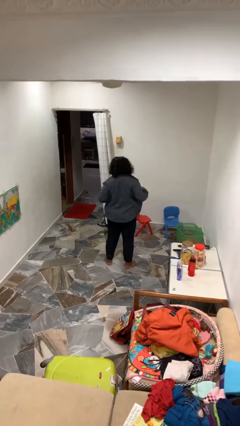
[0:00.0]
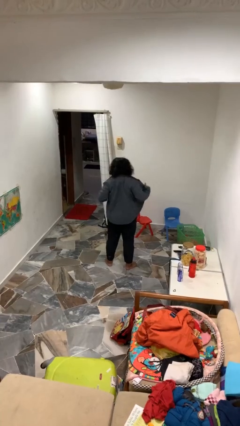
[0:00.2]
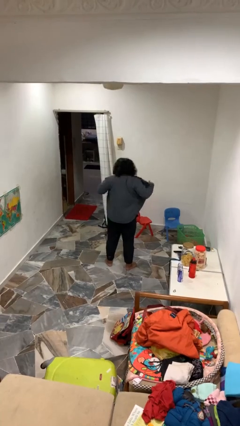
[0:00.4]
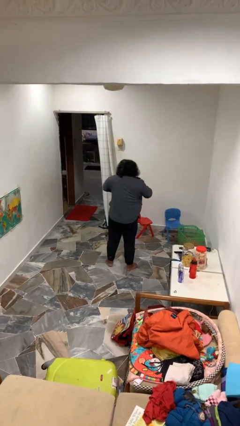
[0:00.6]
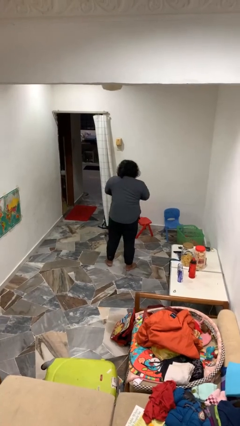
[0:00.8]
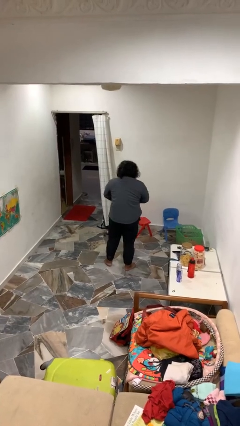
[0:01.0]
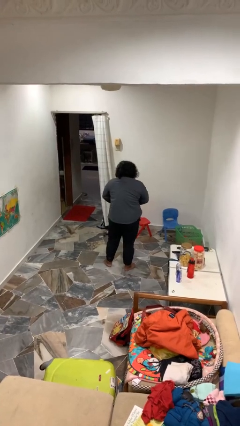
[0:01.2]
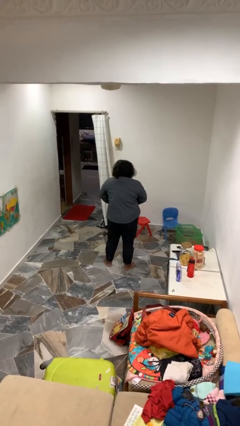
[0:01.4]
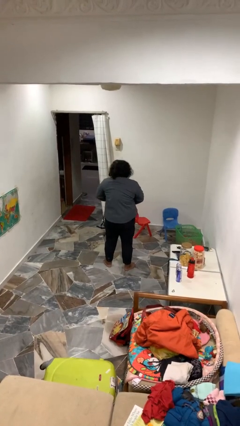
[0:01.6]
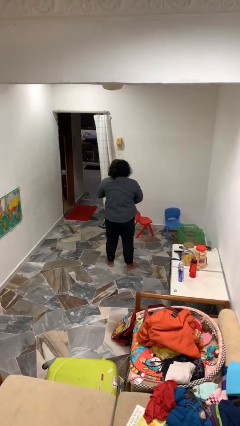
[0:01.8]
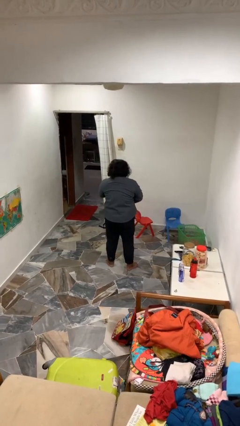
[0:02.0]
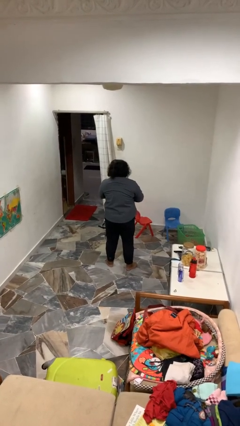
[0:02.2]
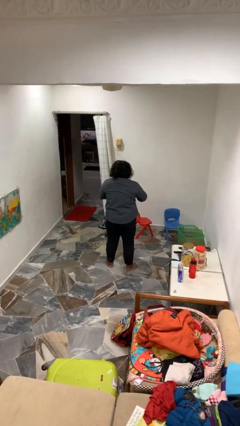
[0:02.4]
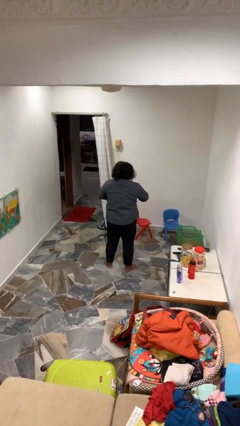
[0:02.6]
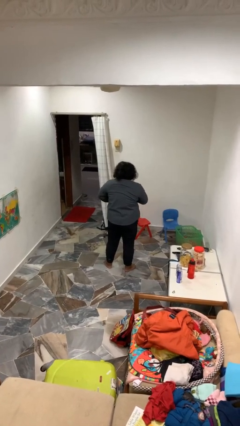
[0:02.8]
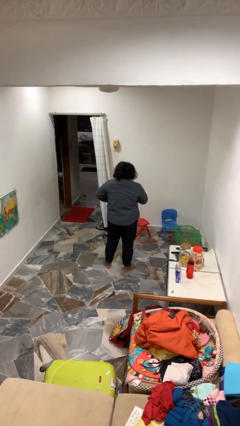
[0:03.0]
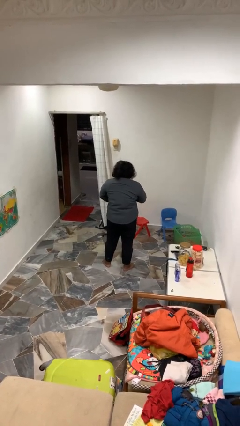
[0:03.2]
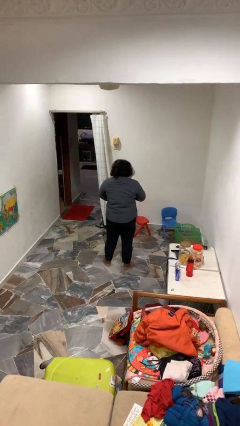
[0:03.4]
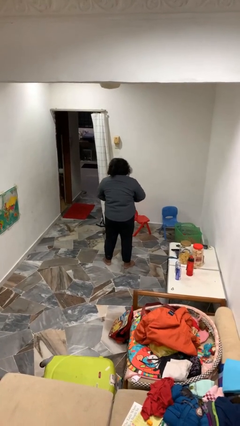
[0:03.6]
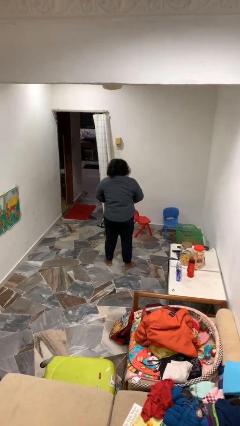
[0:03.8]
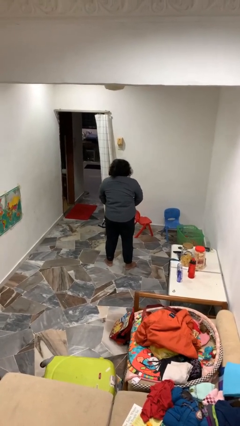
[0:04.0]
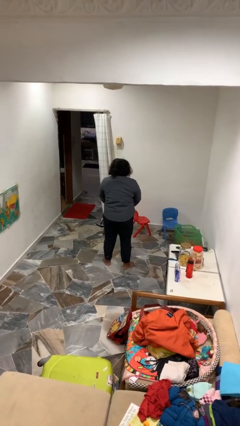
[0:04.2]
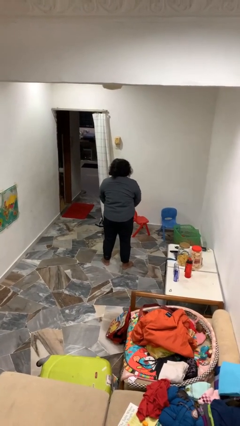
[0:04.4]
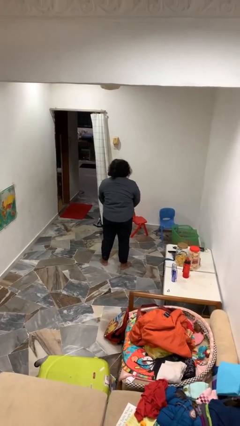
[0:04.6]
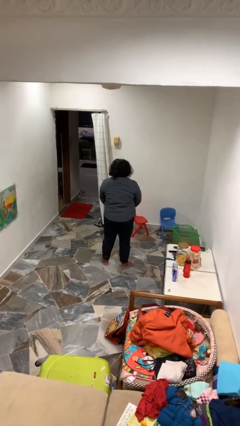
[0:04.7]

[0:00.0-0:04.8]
person buttons shirt

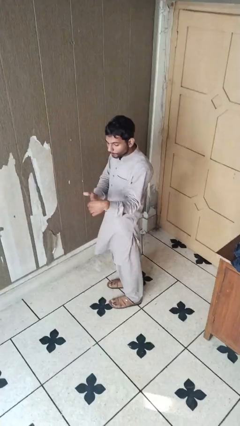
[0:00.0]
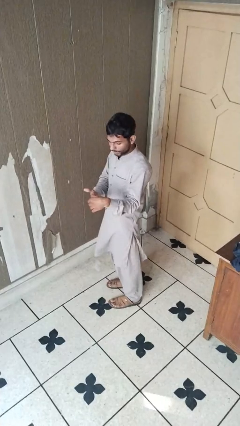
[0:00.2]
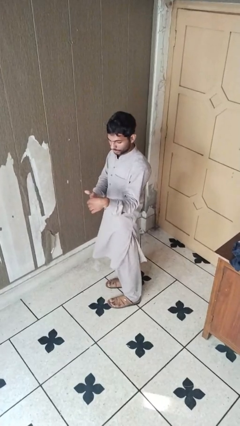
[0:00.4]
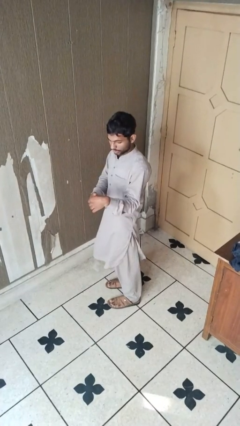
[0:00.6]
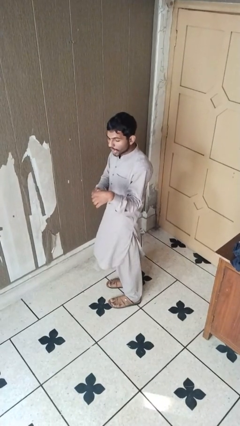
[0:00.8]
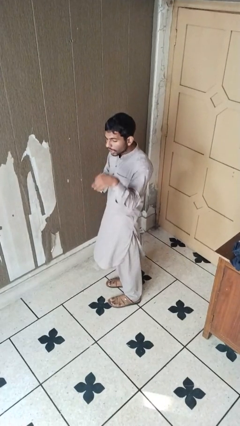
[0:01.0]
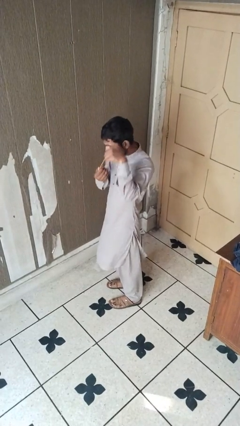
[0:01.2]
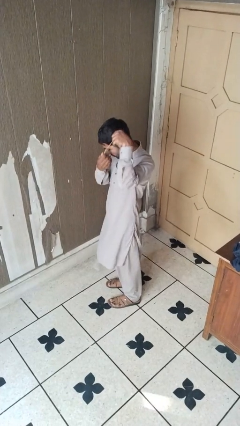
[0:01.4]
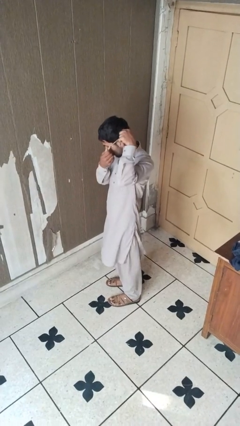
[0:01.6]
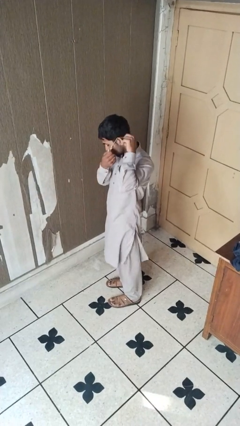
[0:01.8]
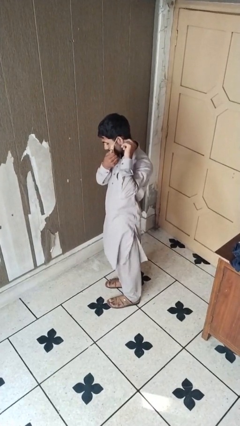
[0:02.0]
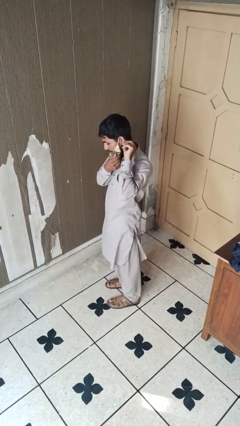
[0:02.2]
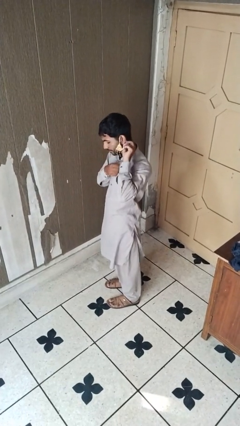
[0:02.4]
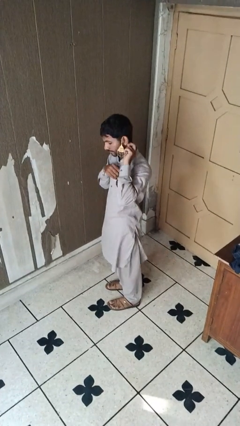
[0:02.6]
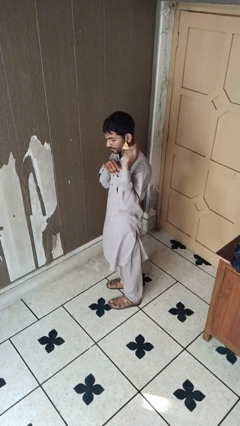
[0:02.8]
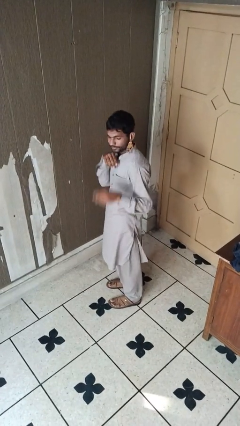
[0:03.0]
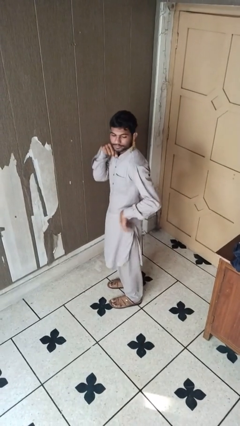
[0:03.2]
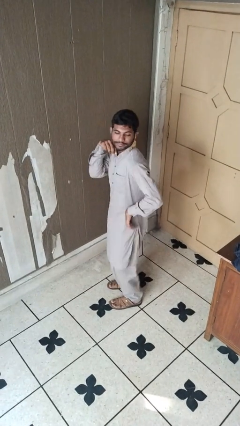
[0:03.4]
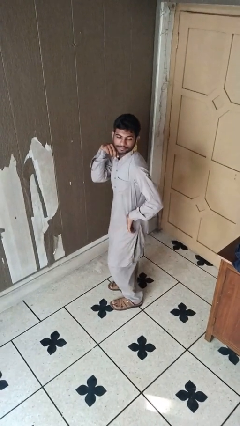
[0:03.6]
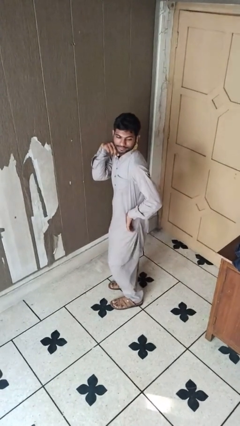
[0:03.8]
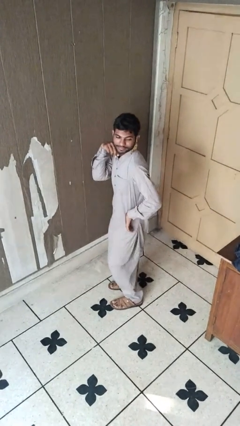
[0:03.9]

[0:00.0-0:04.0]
person puts on earrings

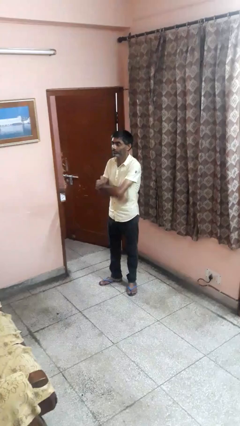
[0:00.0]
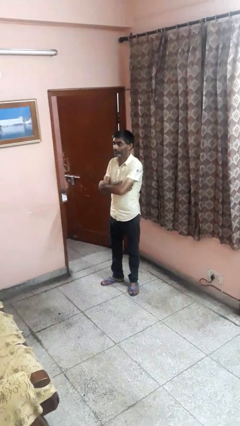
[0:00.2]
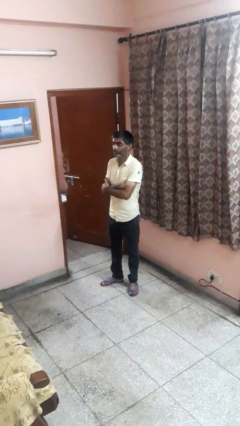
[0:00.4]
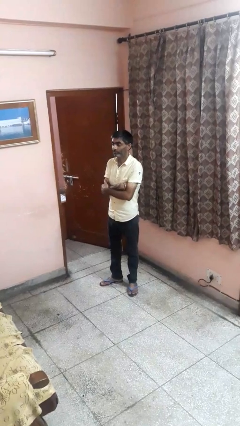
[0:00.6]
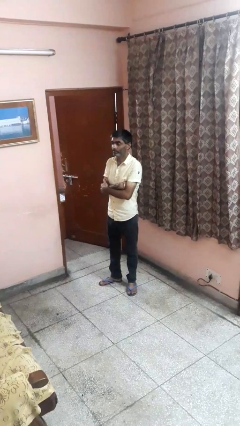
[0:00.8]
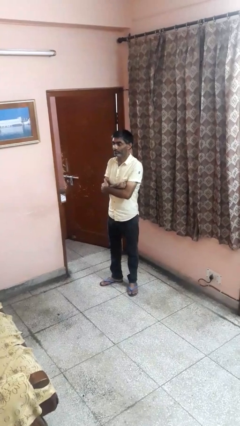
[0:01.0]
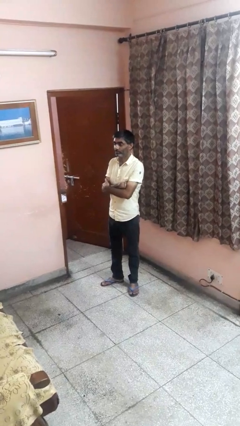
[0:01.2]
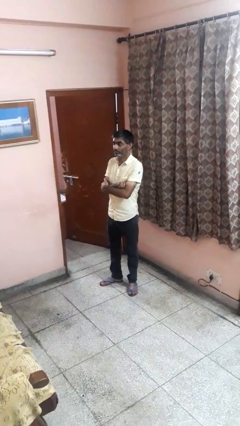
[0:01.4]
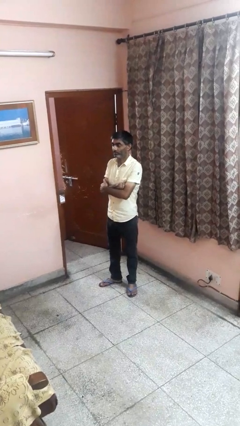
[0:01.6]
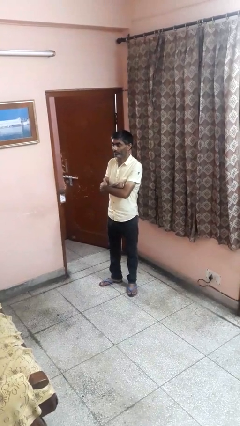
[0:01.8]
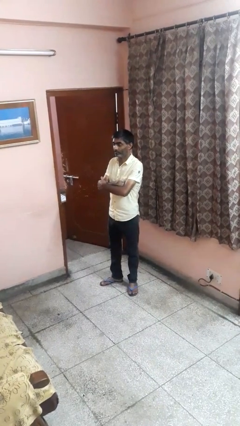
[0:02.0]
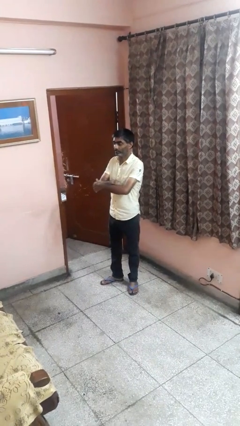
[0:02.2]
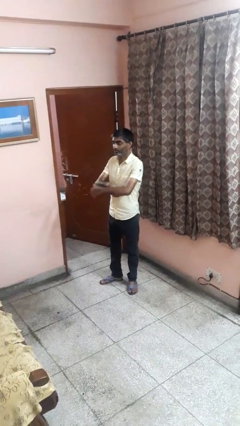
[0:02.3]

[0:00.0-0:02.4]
person crosses arms

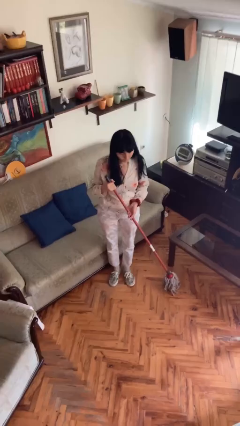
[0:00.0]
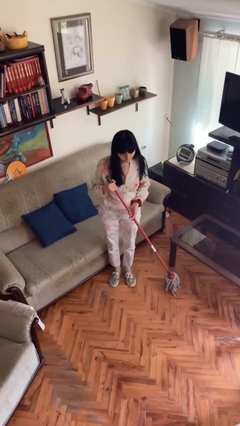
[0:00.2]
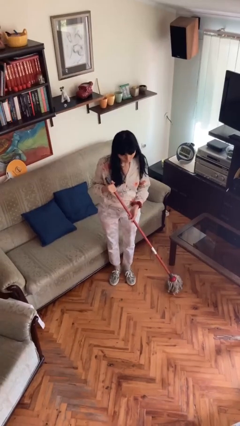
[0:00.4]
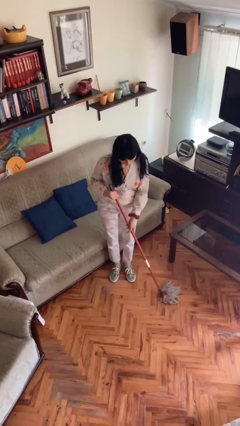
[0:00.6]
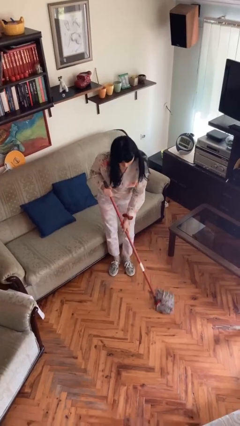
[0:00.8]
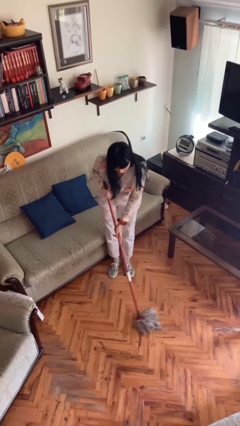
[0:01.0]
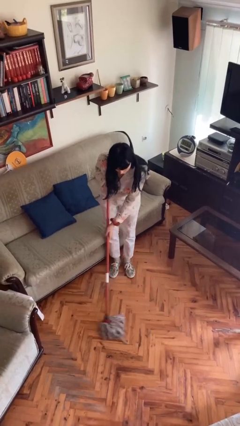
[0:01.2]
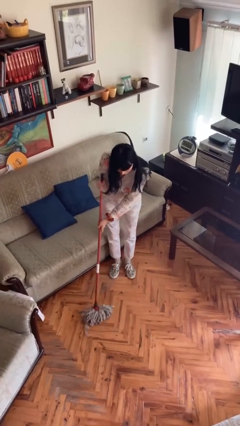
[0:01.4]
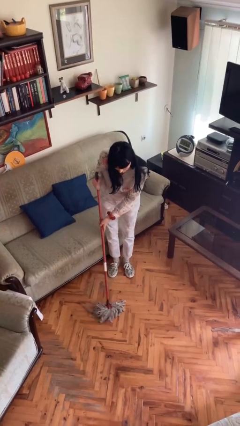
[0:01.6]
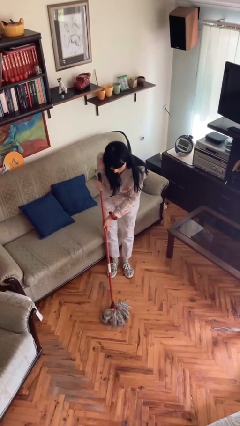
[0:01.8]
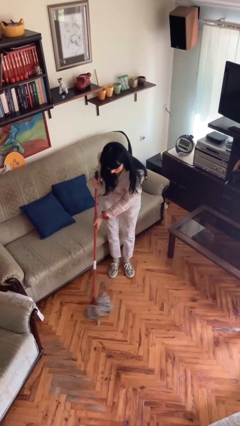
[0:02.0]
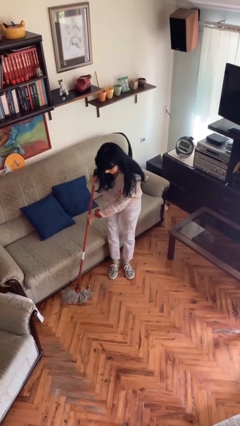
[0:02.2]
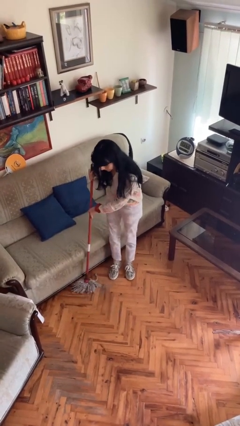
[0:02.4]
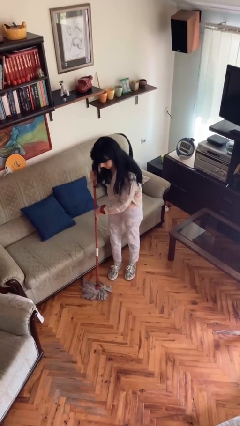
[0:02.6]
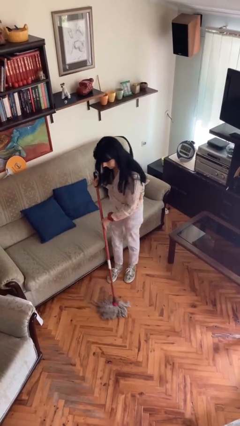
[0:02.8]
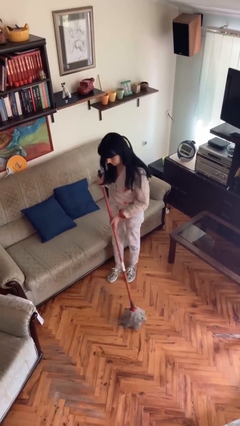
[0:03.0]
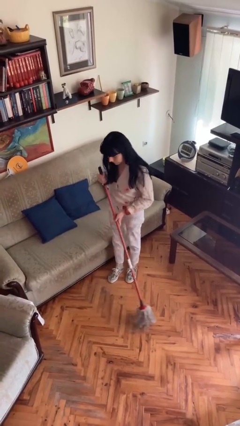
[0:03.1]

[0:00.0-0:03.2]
person sweeps floor

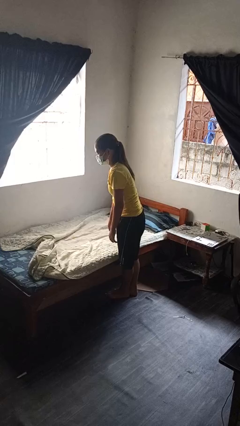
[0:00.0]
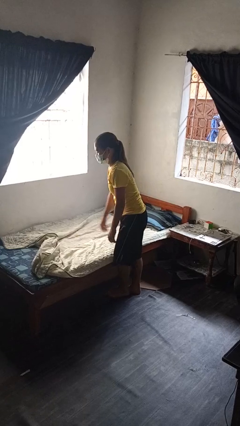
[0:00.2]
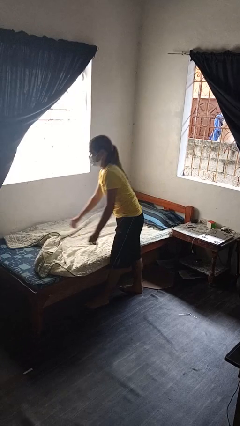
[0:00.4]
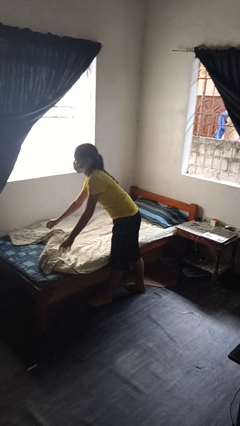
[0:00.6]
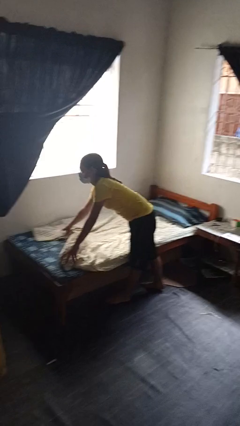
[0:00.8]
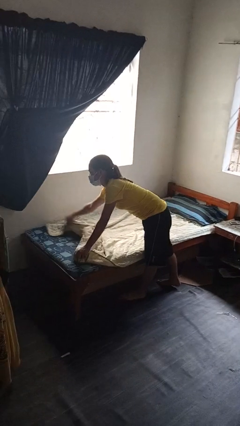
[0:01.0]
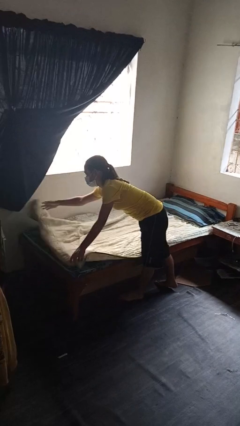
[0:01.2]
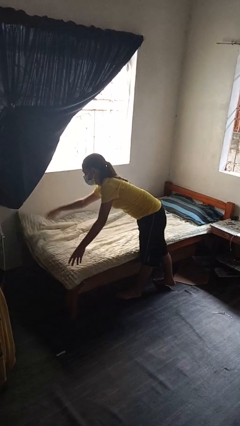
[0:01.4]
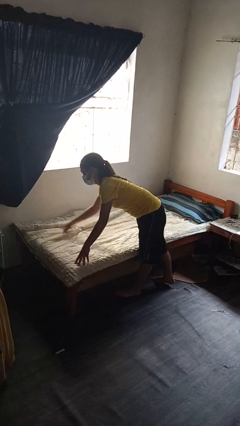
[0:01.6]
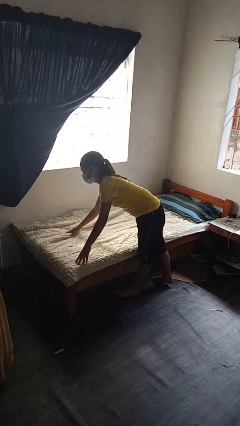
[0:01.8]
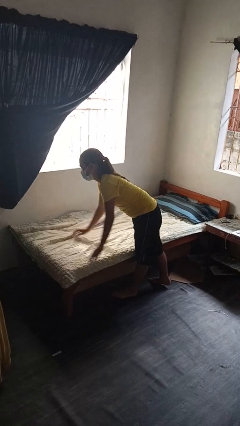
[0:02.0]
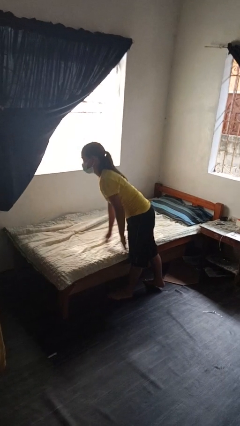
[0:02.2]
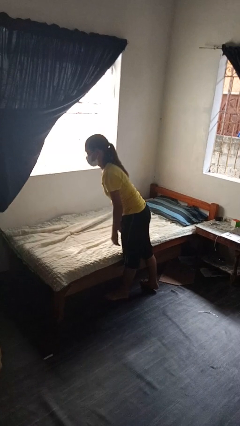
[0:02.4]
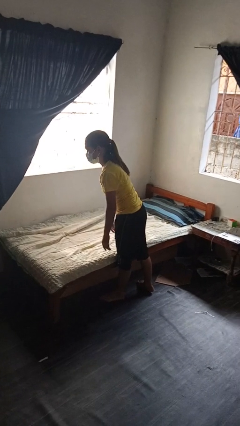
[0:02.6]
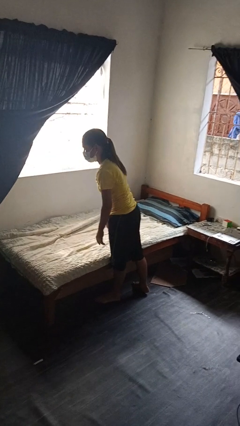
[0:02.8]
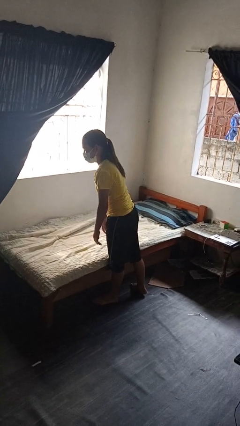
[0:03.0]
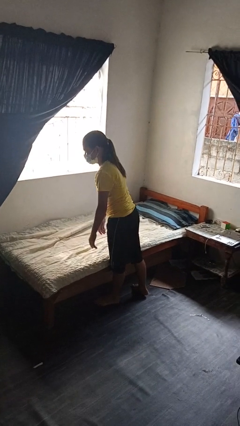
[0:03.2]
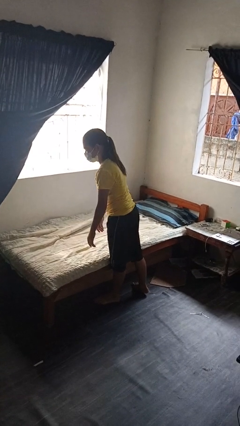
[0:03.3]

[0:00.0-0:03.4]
person makes bed
